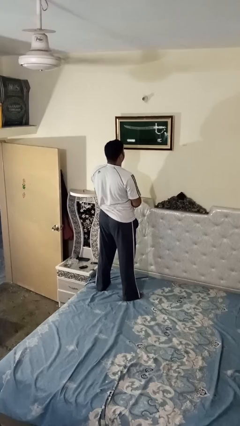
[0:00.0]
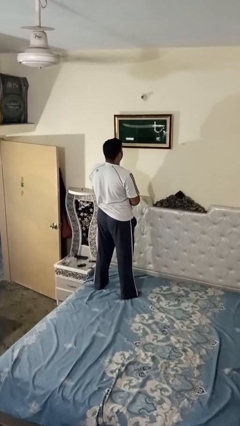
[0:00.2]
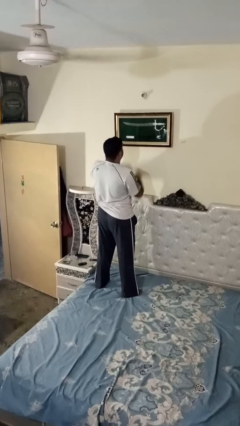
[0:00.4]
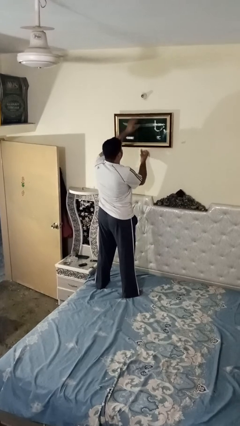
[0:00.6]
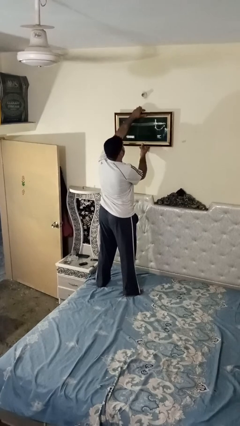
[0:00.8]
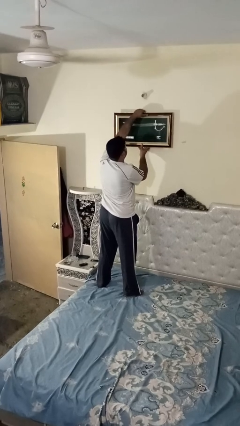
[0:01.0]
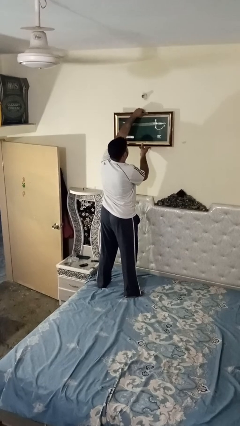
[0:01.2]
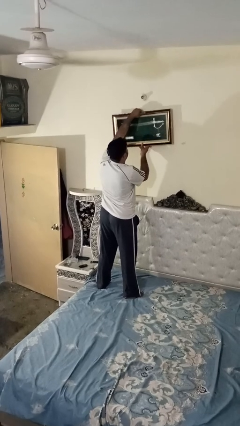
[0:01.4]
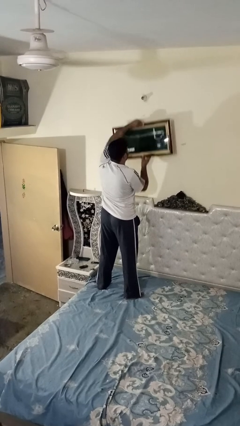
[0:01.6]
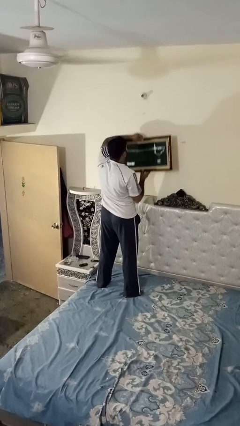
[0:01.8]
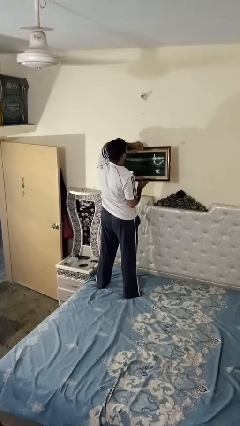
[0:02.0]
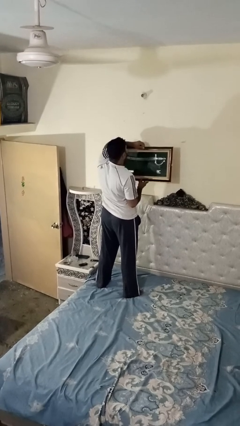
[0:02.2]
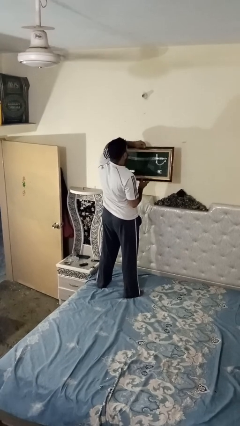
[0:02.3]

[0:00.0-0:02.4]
person takes down picture frame

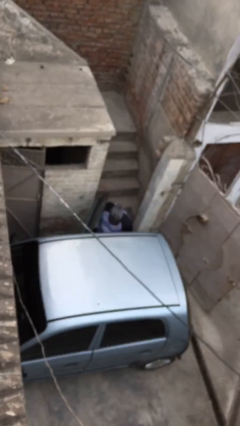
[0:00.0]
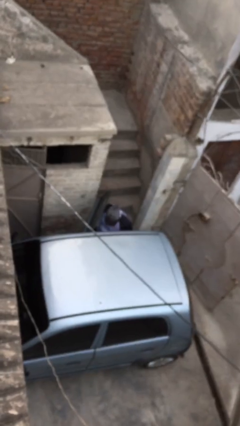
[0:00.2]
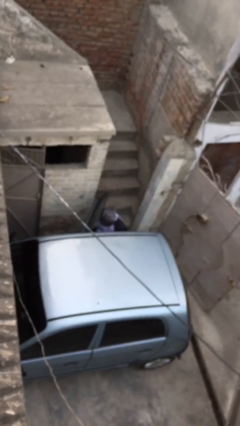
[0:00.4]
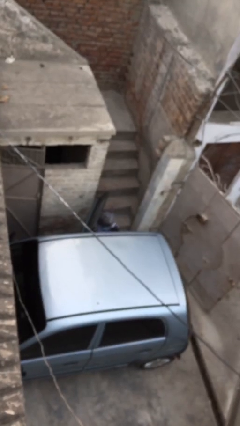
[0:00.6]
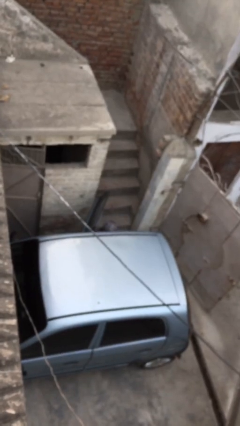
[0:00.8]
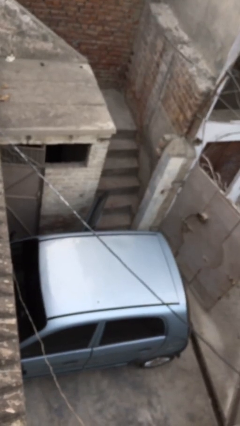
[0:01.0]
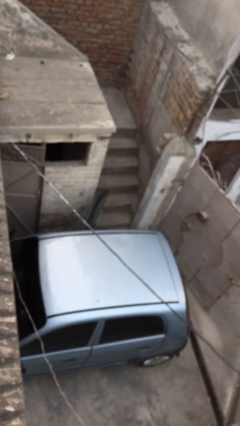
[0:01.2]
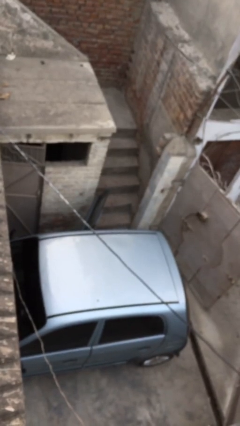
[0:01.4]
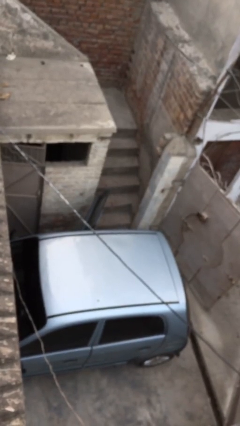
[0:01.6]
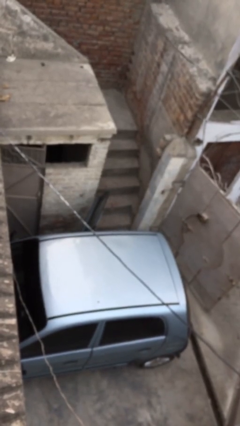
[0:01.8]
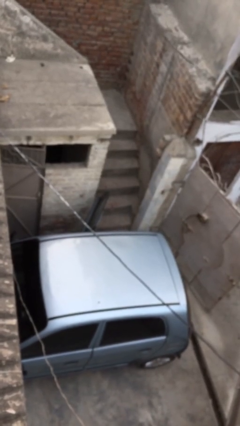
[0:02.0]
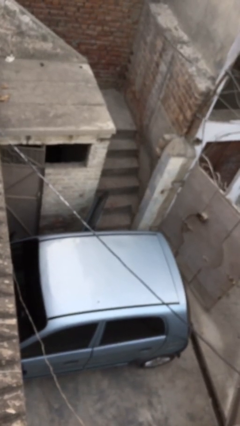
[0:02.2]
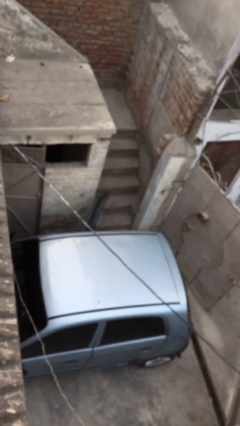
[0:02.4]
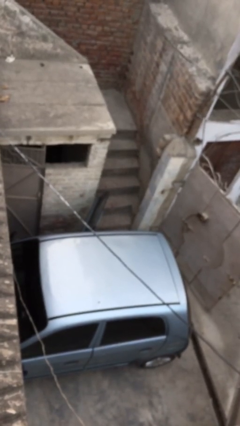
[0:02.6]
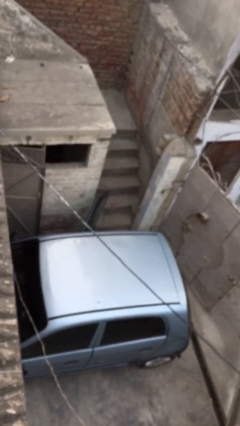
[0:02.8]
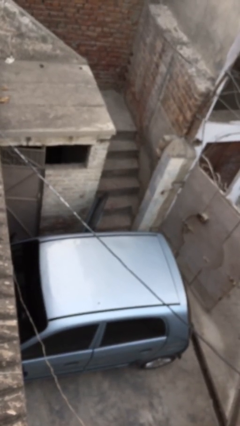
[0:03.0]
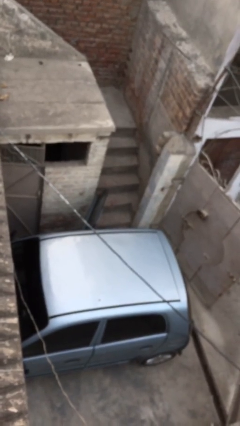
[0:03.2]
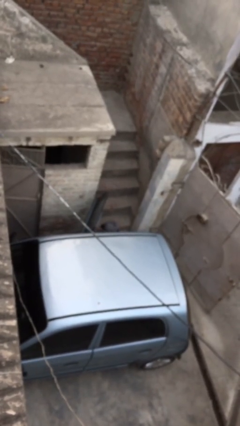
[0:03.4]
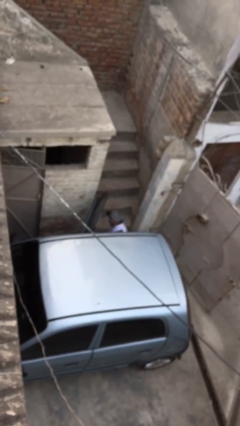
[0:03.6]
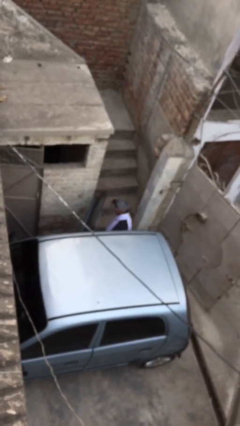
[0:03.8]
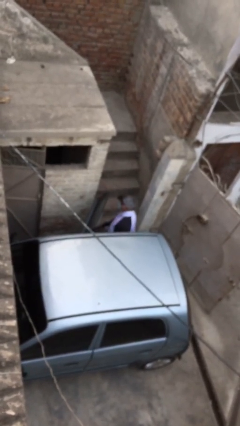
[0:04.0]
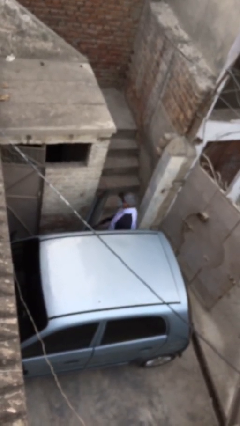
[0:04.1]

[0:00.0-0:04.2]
person enters car

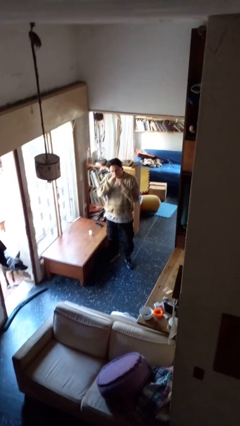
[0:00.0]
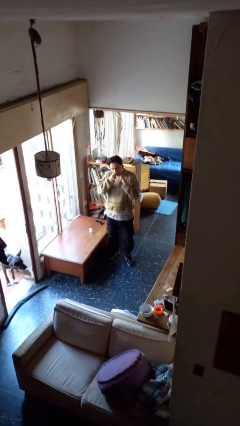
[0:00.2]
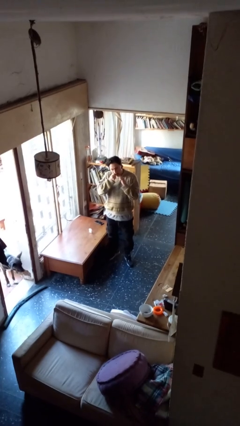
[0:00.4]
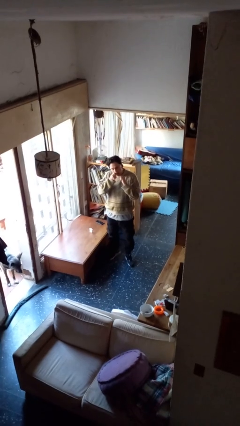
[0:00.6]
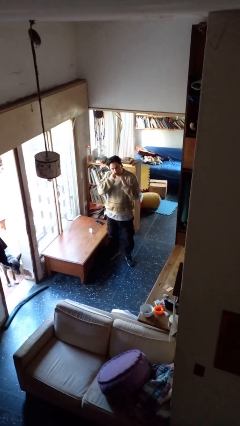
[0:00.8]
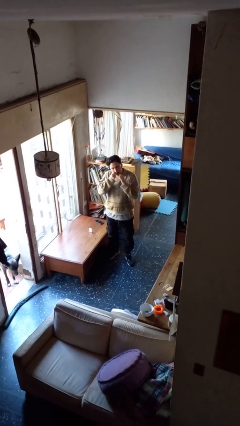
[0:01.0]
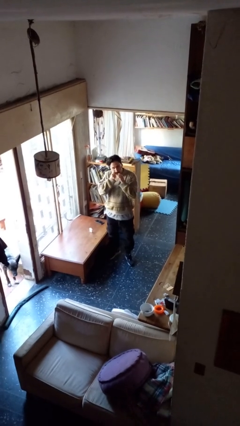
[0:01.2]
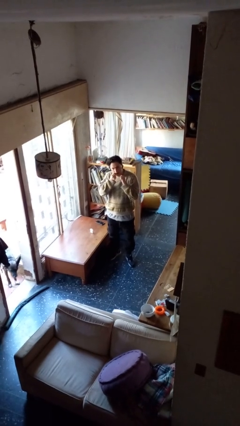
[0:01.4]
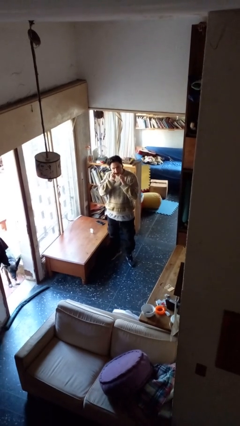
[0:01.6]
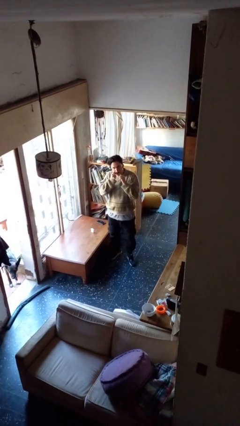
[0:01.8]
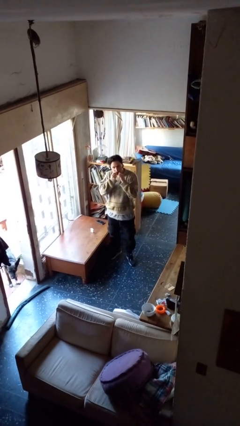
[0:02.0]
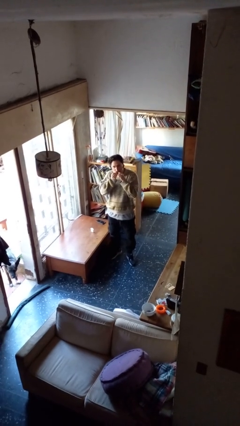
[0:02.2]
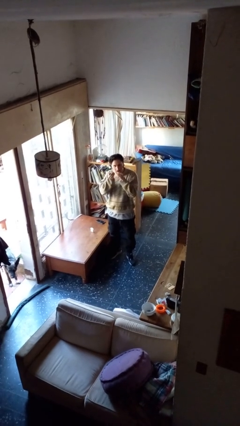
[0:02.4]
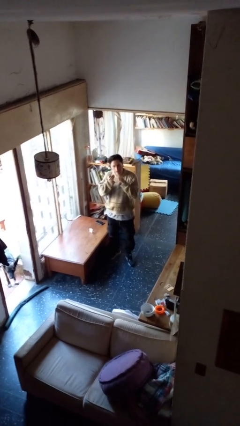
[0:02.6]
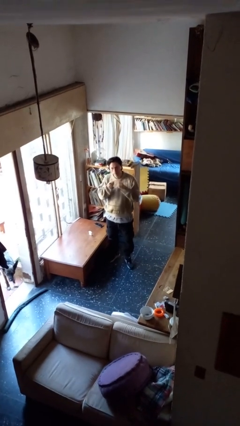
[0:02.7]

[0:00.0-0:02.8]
person flosses

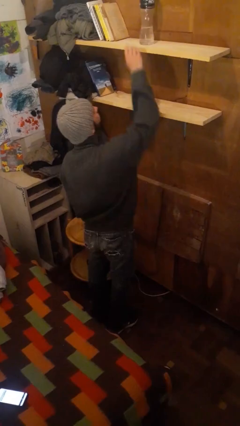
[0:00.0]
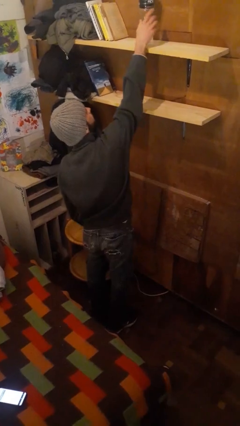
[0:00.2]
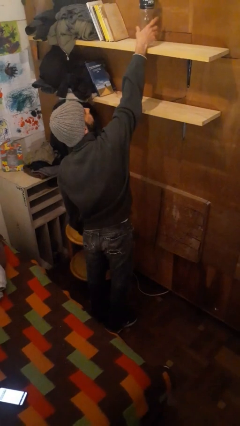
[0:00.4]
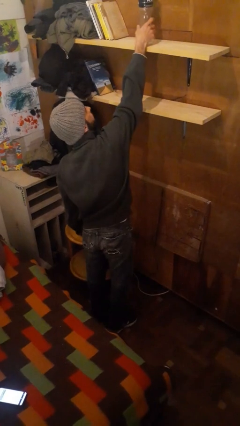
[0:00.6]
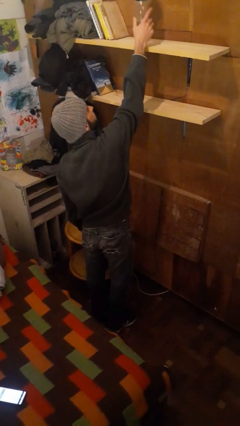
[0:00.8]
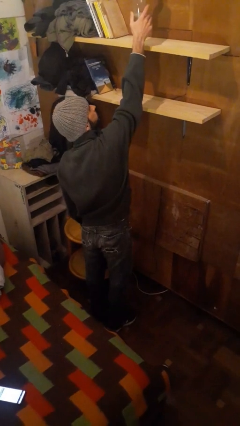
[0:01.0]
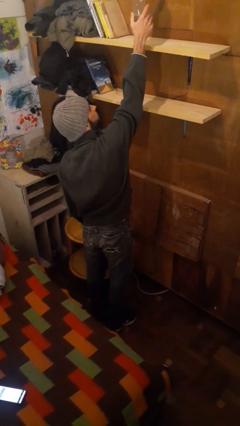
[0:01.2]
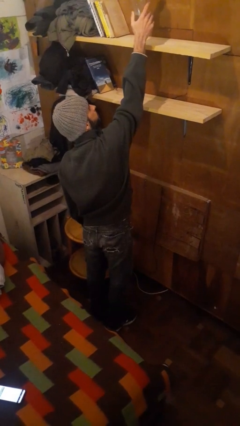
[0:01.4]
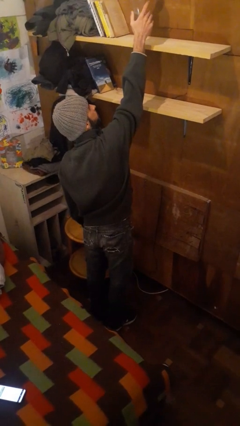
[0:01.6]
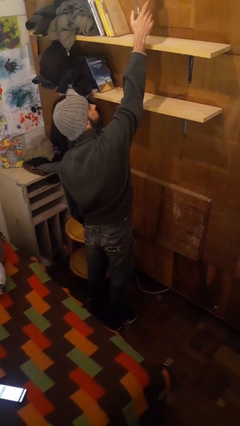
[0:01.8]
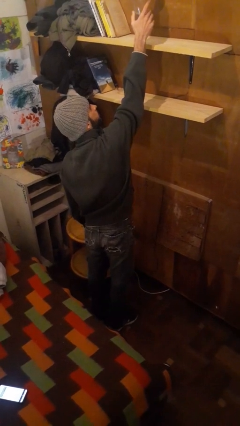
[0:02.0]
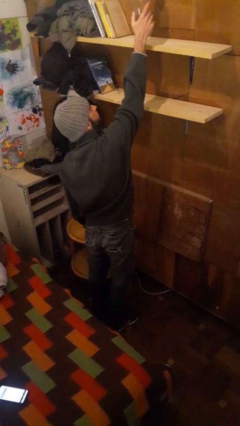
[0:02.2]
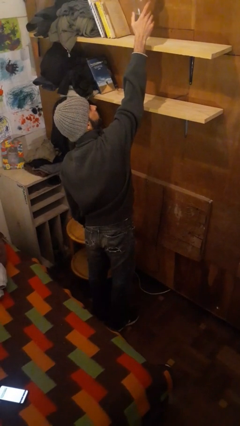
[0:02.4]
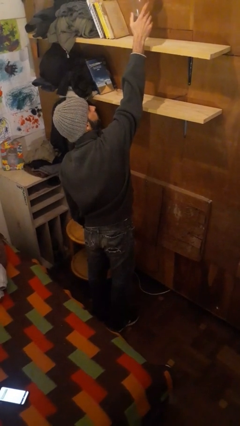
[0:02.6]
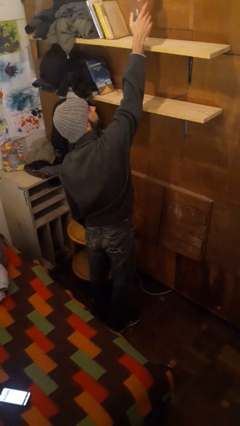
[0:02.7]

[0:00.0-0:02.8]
person picks up object from shelf

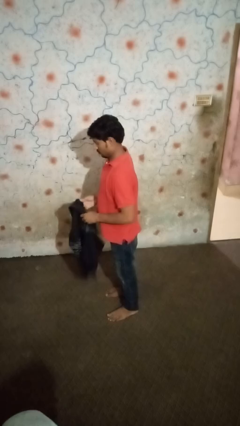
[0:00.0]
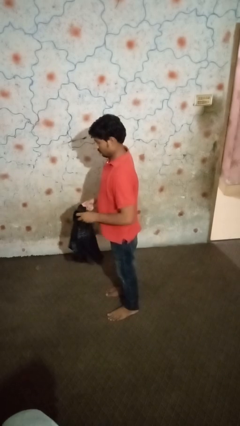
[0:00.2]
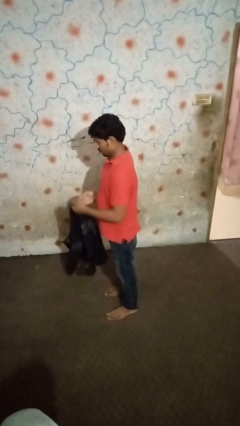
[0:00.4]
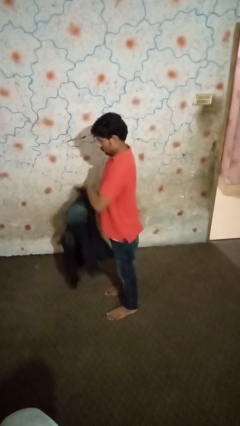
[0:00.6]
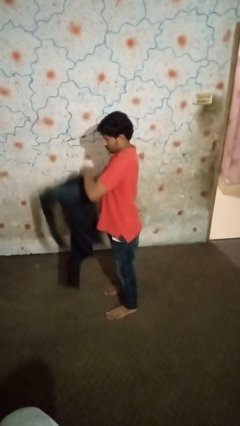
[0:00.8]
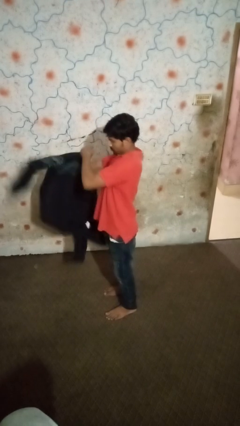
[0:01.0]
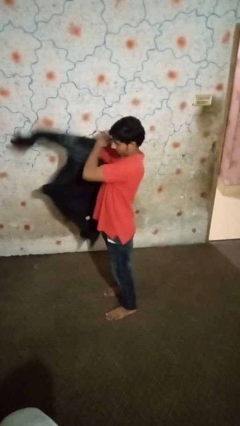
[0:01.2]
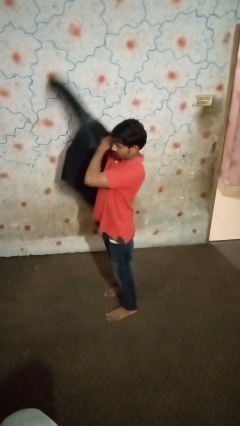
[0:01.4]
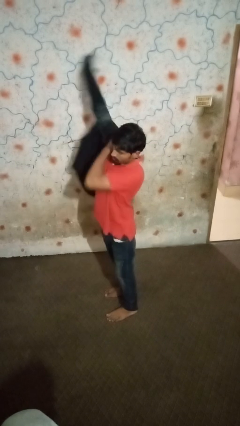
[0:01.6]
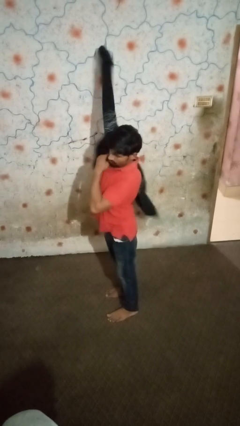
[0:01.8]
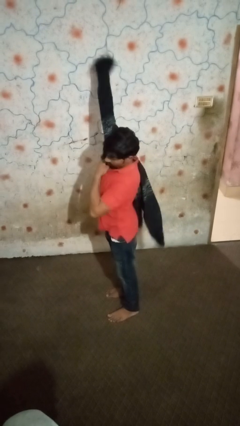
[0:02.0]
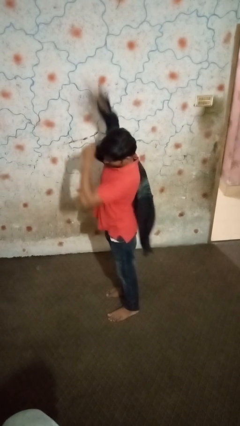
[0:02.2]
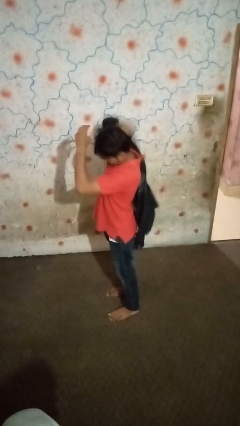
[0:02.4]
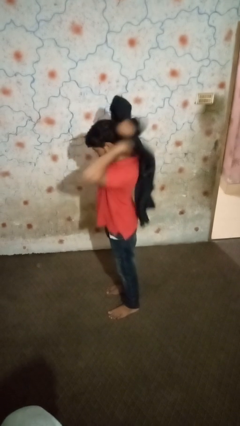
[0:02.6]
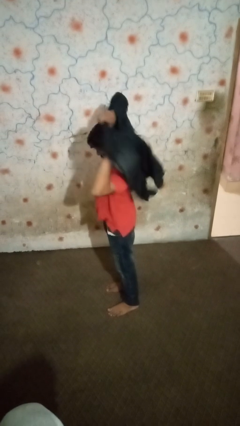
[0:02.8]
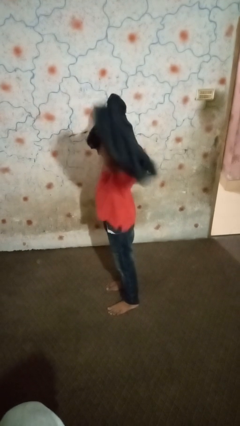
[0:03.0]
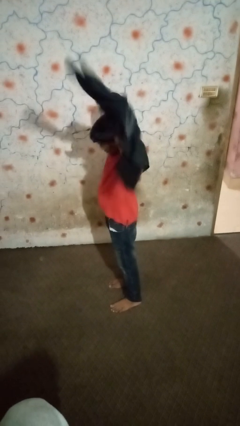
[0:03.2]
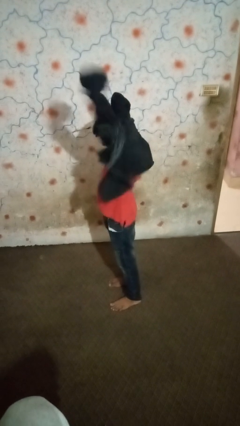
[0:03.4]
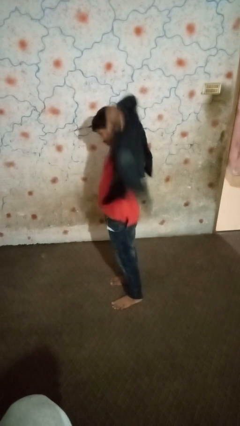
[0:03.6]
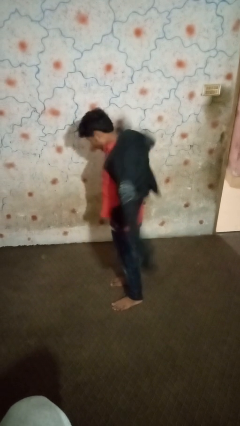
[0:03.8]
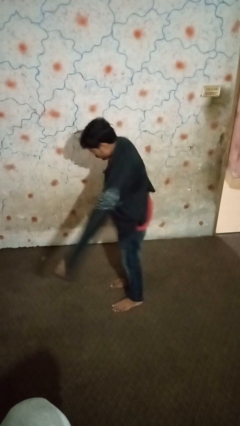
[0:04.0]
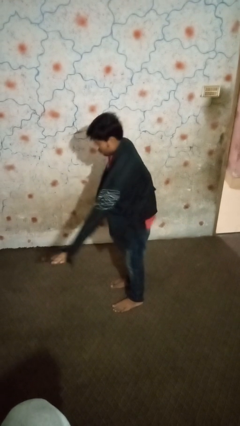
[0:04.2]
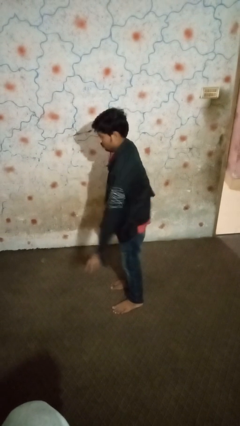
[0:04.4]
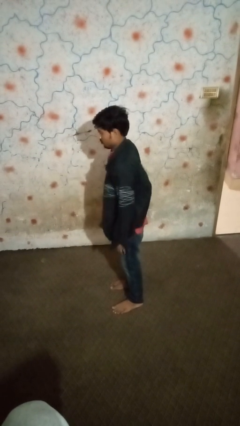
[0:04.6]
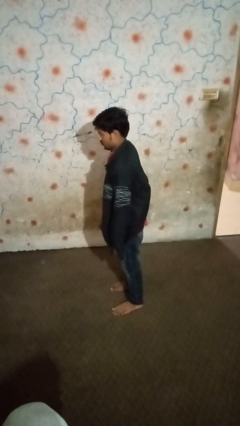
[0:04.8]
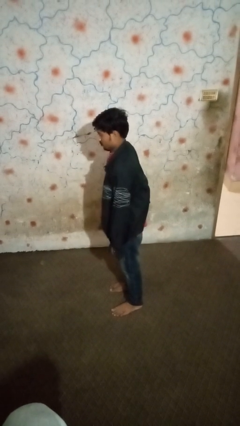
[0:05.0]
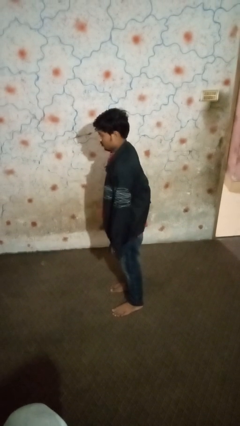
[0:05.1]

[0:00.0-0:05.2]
person puts on shirt
